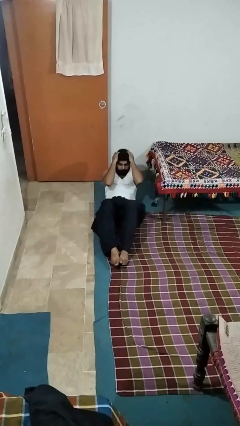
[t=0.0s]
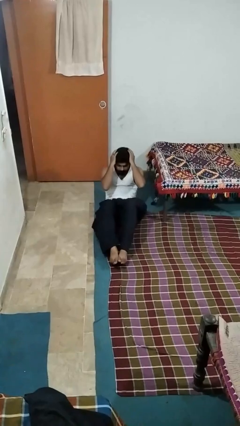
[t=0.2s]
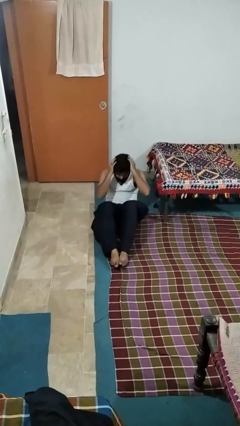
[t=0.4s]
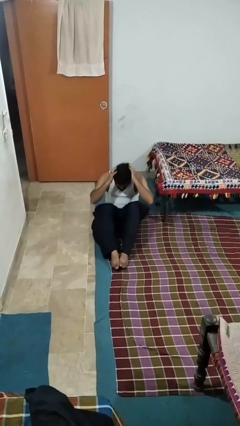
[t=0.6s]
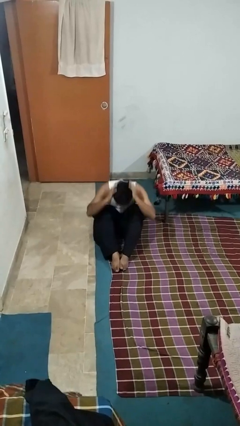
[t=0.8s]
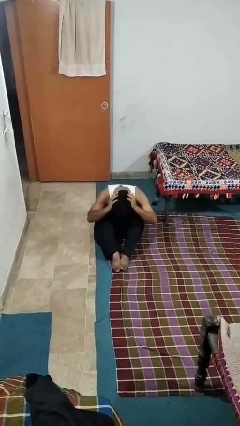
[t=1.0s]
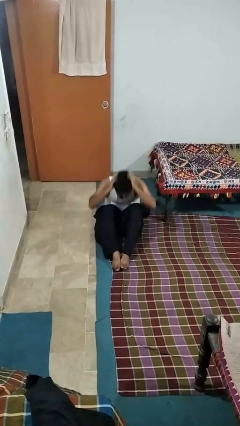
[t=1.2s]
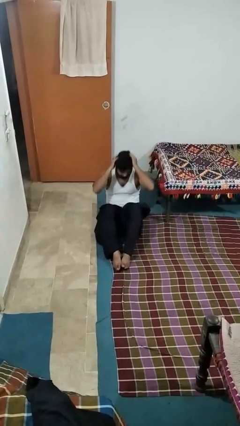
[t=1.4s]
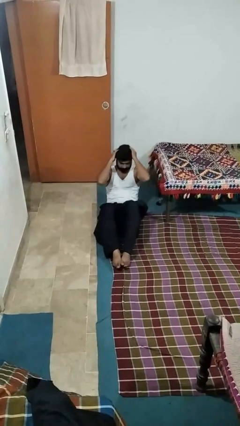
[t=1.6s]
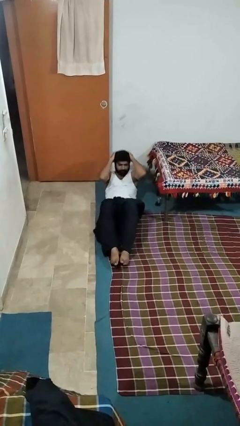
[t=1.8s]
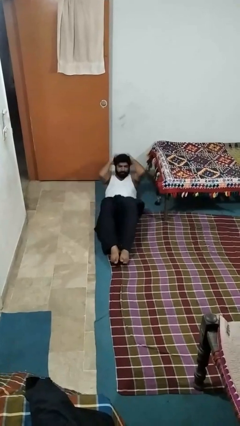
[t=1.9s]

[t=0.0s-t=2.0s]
person exercises with situp

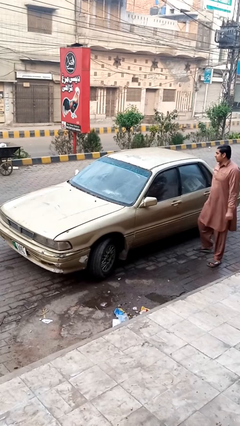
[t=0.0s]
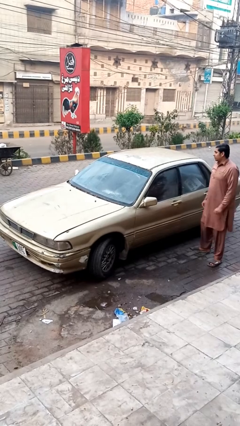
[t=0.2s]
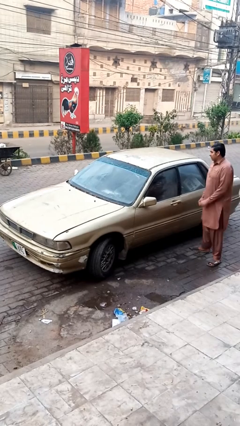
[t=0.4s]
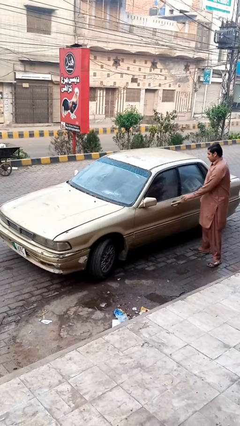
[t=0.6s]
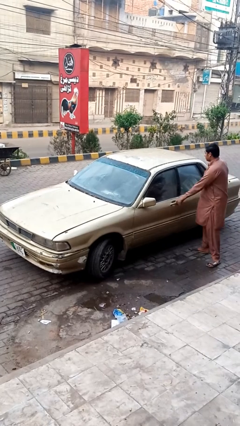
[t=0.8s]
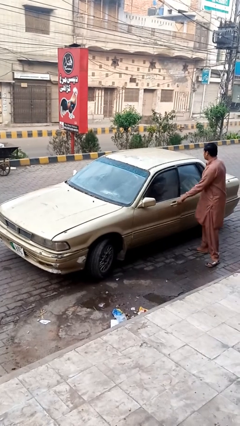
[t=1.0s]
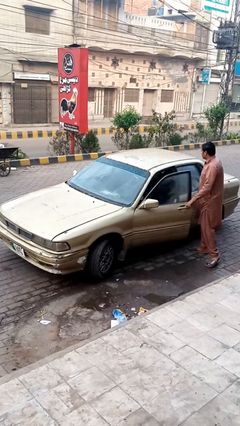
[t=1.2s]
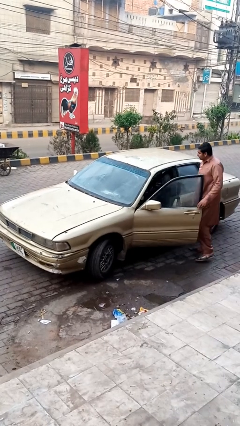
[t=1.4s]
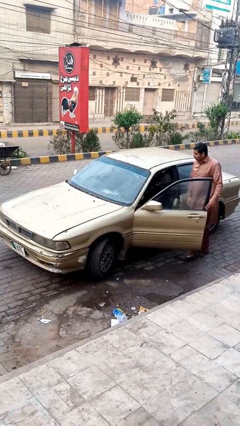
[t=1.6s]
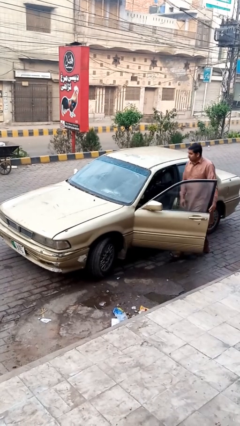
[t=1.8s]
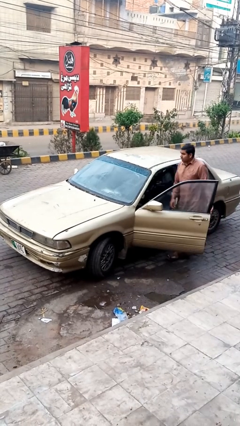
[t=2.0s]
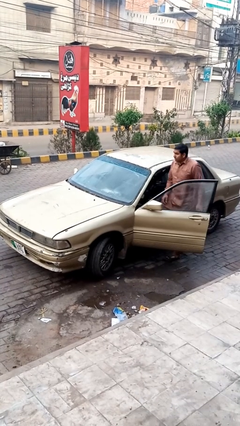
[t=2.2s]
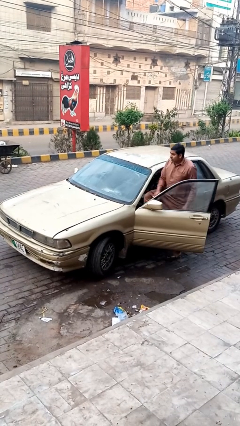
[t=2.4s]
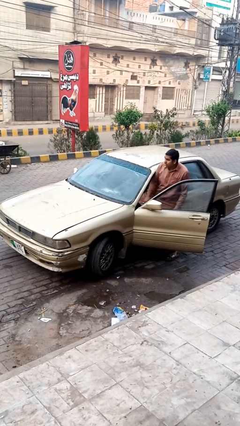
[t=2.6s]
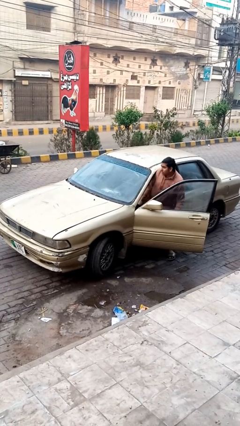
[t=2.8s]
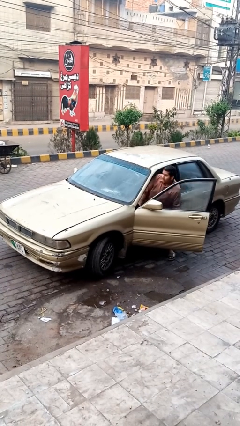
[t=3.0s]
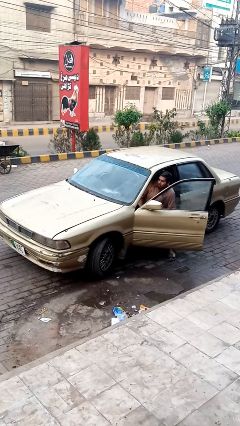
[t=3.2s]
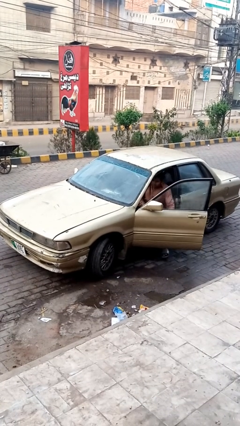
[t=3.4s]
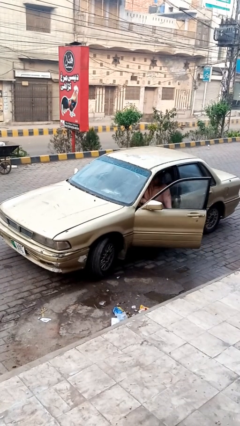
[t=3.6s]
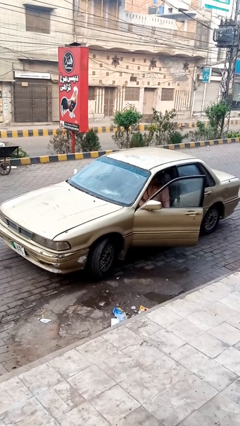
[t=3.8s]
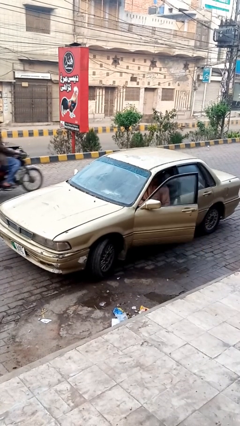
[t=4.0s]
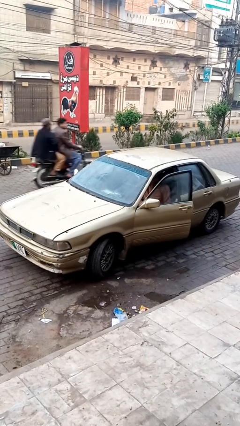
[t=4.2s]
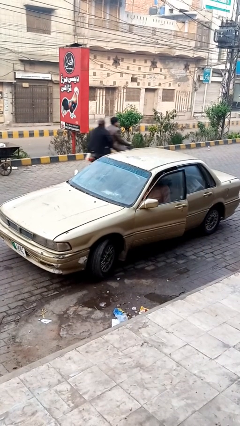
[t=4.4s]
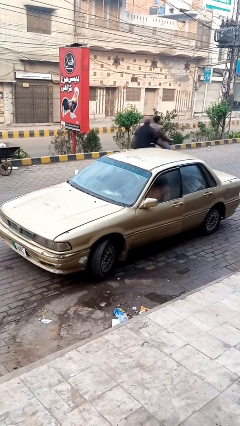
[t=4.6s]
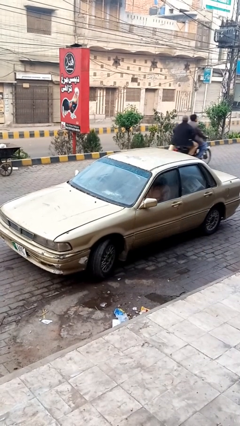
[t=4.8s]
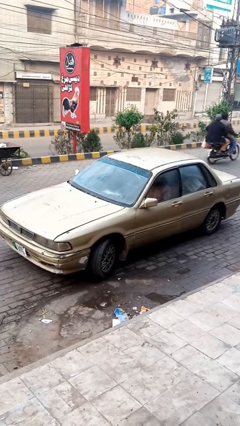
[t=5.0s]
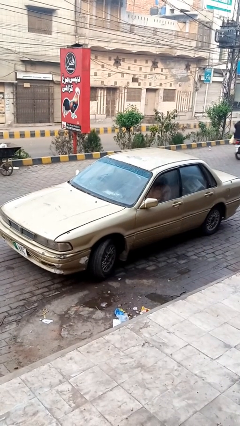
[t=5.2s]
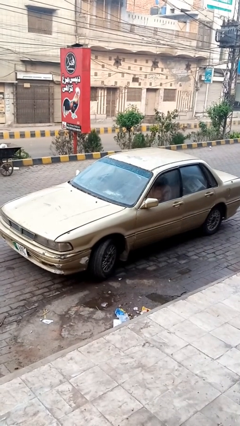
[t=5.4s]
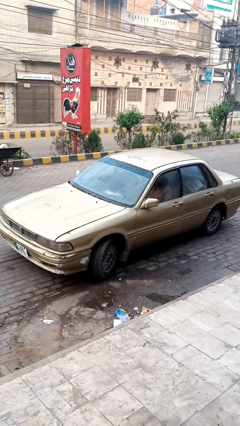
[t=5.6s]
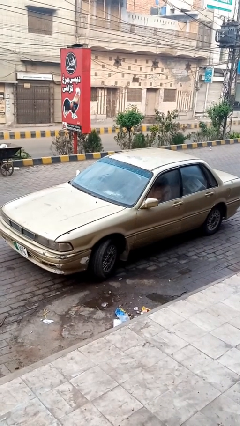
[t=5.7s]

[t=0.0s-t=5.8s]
car picks up person

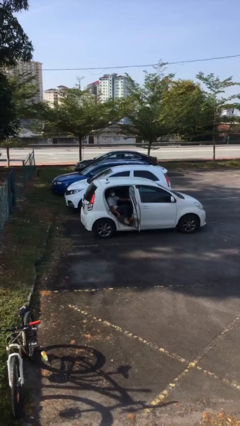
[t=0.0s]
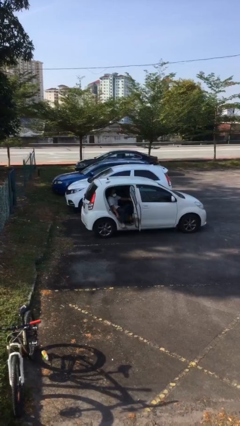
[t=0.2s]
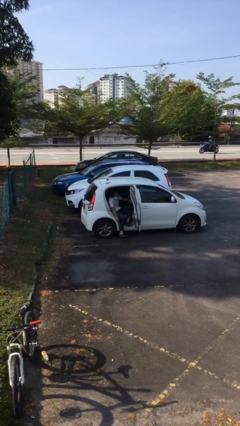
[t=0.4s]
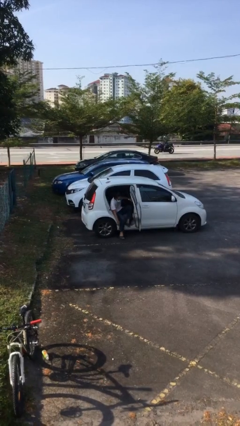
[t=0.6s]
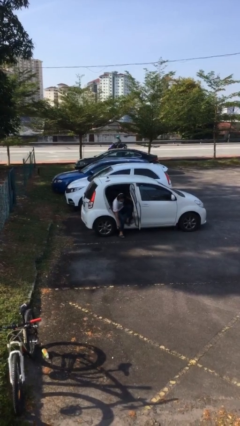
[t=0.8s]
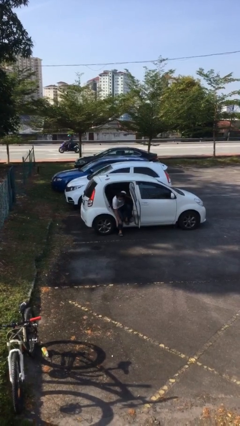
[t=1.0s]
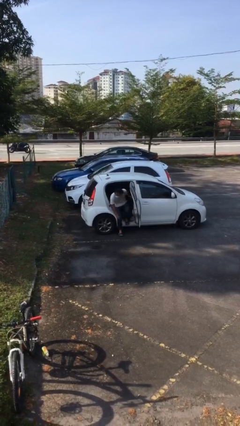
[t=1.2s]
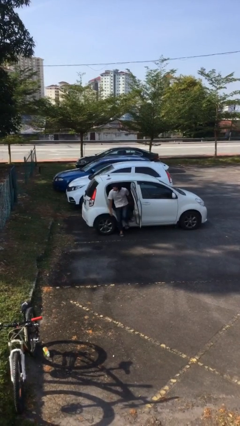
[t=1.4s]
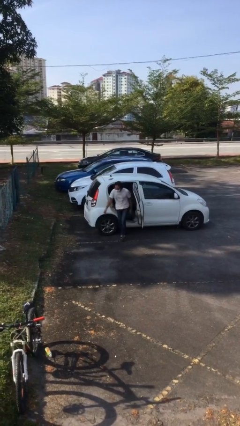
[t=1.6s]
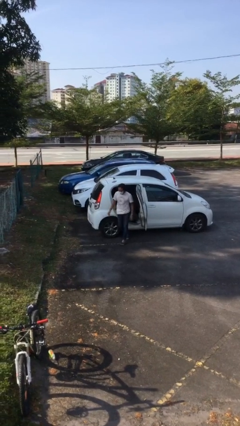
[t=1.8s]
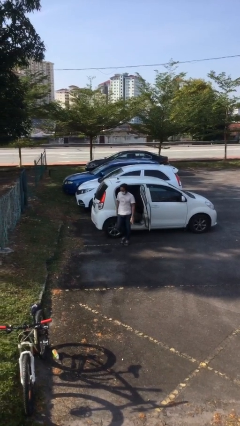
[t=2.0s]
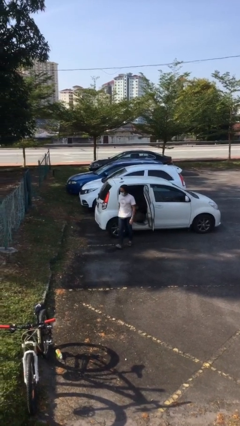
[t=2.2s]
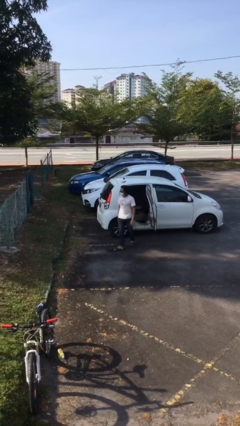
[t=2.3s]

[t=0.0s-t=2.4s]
person exits car

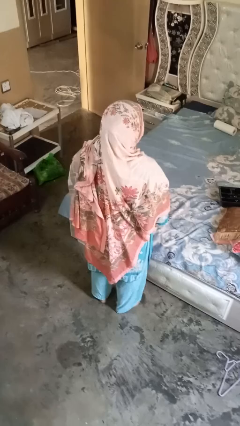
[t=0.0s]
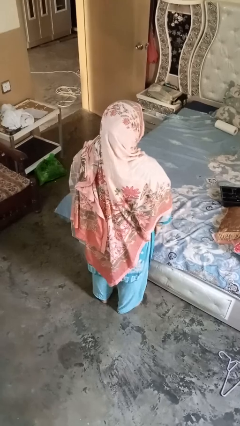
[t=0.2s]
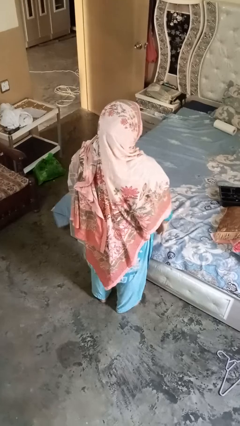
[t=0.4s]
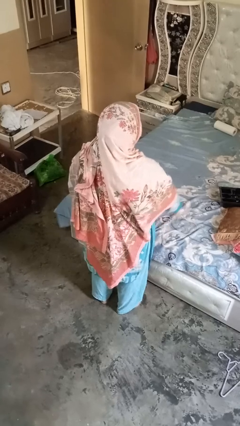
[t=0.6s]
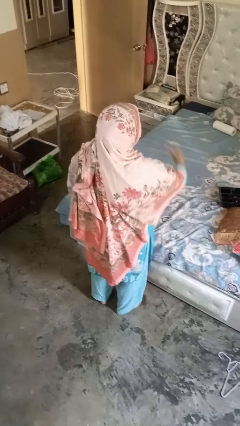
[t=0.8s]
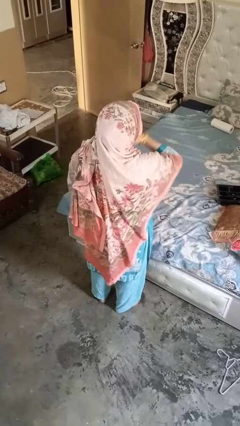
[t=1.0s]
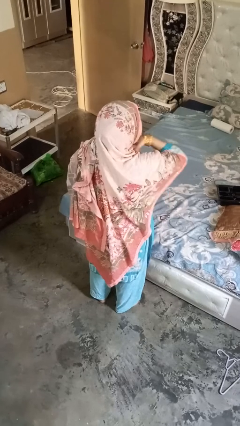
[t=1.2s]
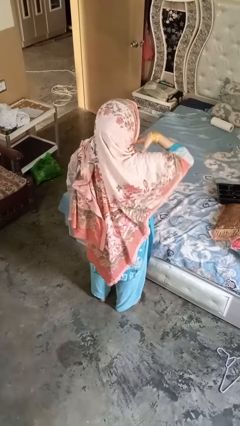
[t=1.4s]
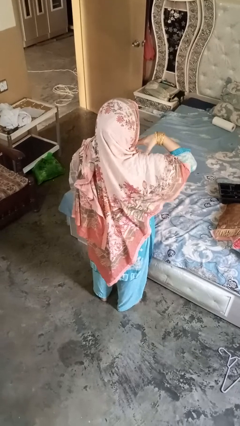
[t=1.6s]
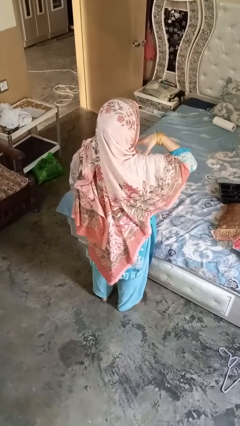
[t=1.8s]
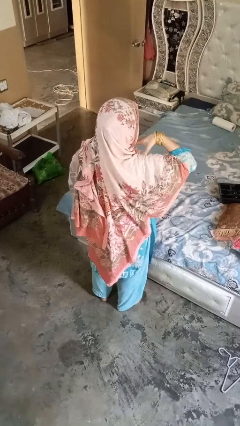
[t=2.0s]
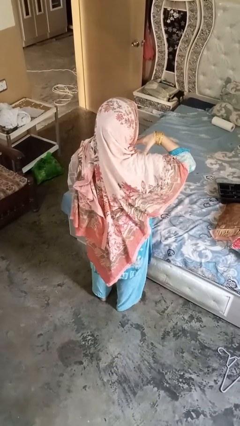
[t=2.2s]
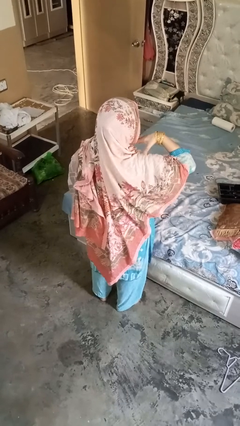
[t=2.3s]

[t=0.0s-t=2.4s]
person gestures cut

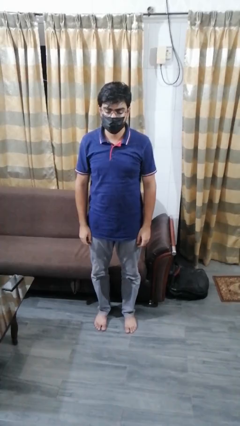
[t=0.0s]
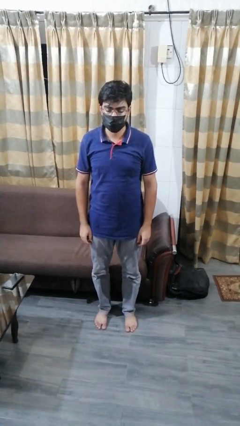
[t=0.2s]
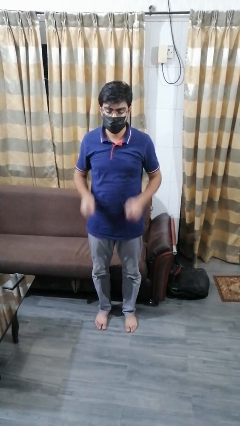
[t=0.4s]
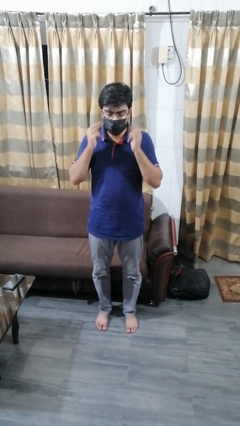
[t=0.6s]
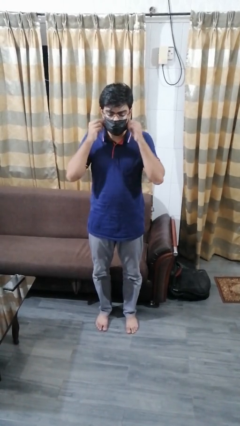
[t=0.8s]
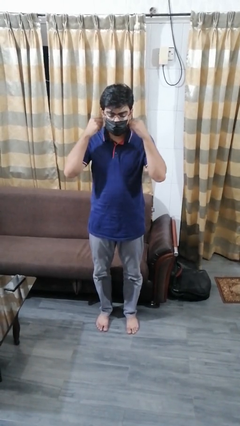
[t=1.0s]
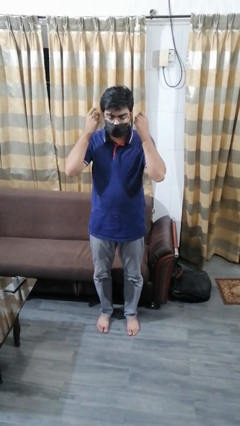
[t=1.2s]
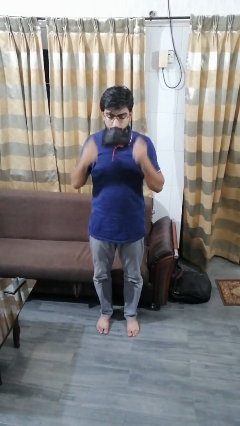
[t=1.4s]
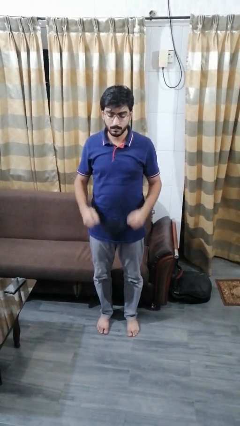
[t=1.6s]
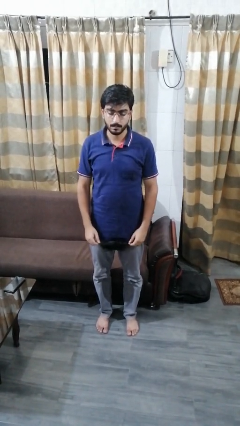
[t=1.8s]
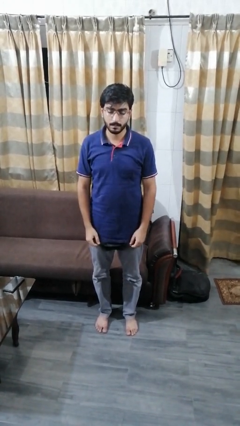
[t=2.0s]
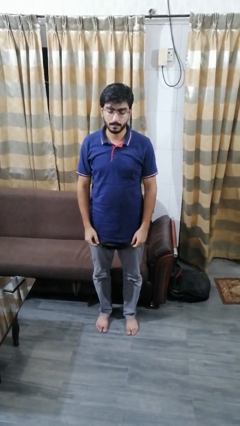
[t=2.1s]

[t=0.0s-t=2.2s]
person takes off facemask

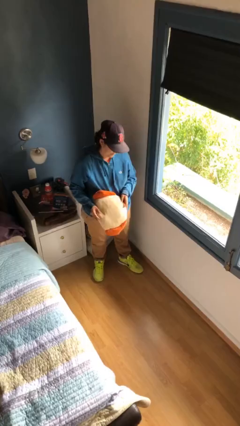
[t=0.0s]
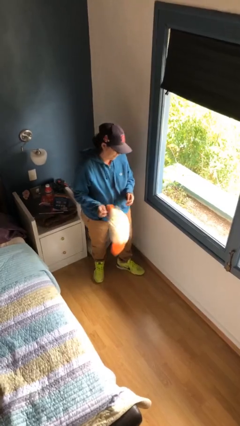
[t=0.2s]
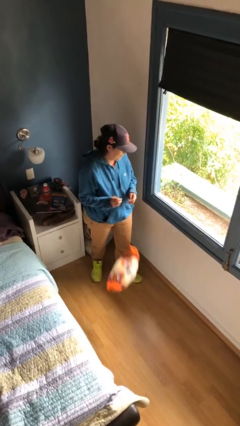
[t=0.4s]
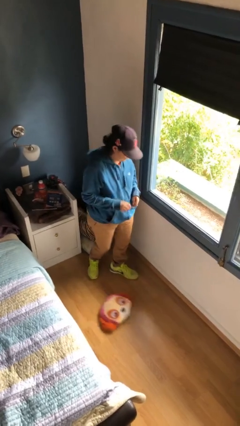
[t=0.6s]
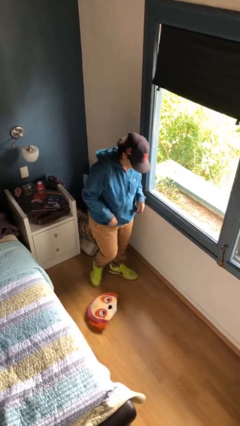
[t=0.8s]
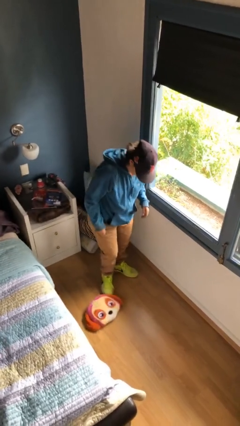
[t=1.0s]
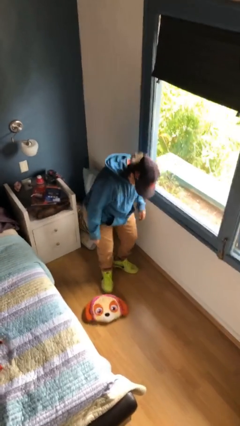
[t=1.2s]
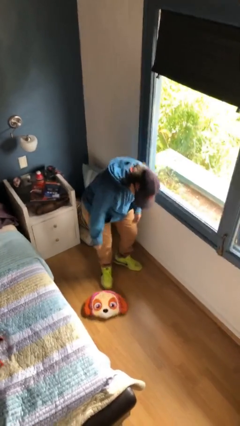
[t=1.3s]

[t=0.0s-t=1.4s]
person drops object

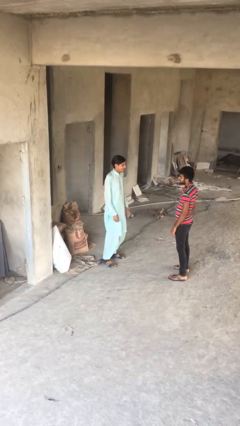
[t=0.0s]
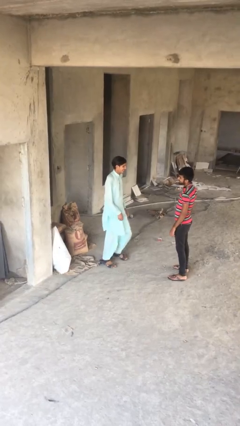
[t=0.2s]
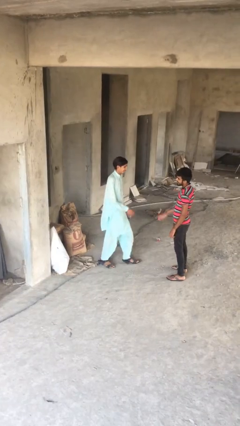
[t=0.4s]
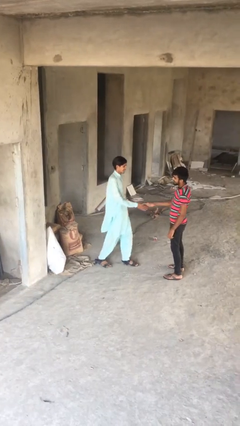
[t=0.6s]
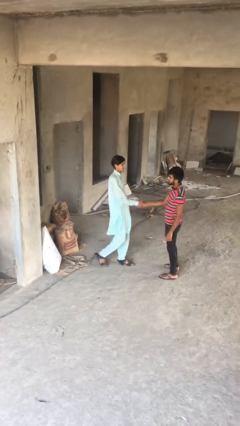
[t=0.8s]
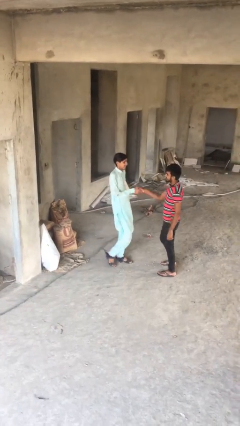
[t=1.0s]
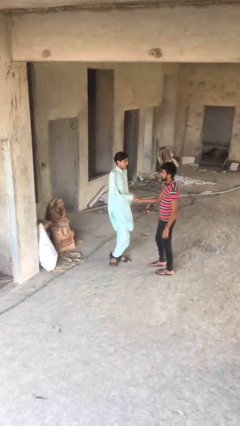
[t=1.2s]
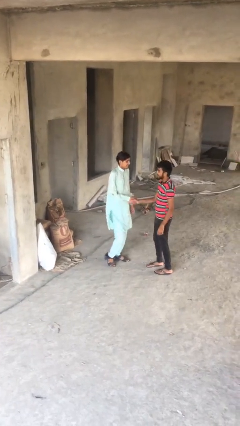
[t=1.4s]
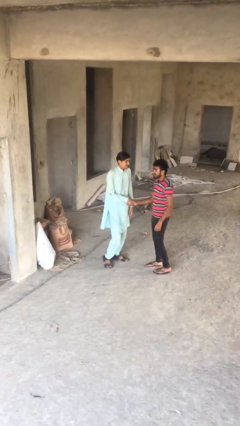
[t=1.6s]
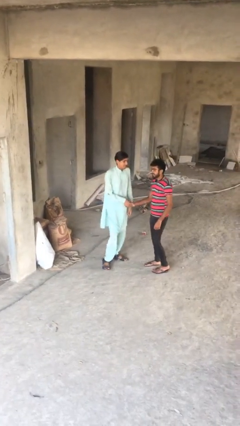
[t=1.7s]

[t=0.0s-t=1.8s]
person shakes hand
